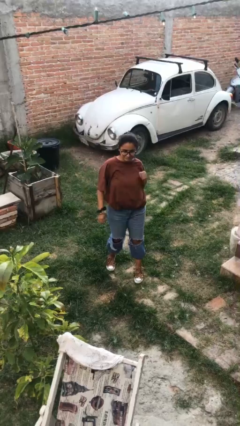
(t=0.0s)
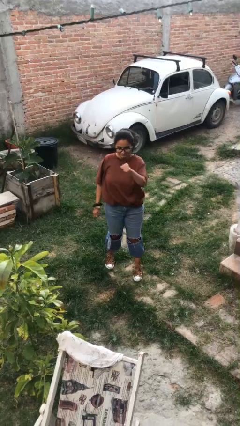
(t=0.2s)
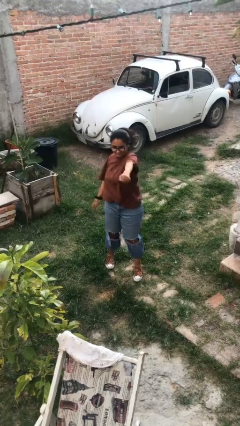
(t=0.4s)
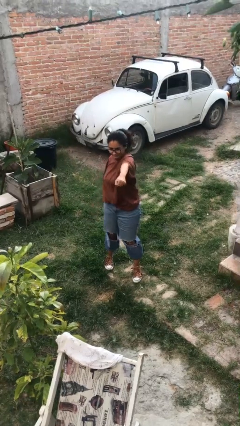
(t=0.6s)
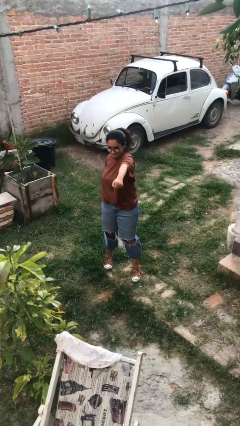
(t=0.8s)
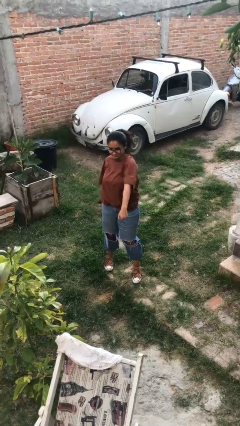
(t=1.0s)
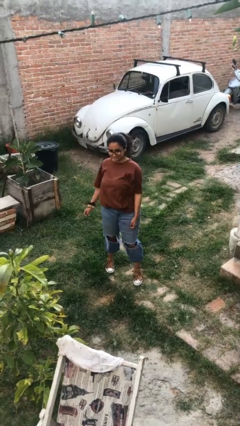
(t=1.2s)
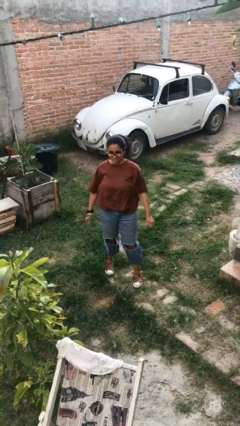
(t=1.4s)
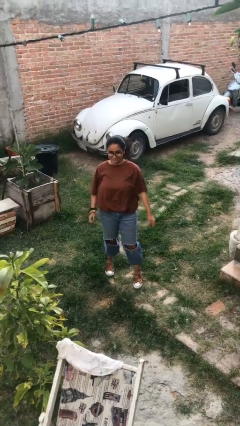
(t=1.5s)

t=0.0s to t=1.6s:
person karate chop

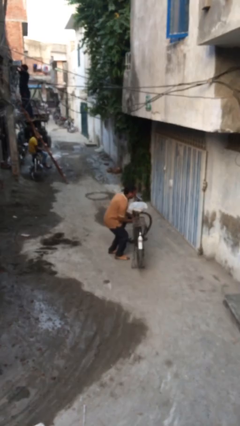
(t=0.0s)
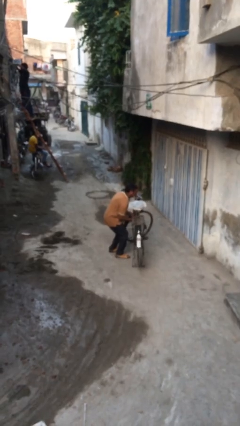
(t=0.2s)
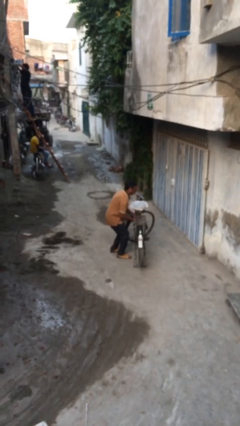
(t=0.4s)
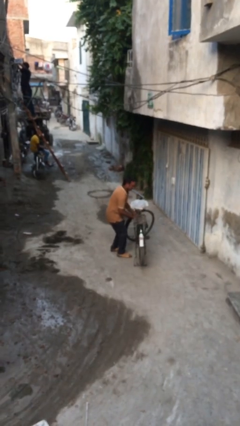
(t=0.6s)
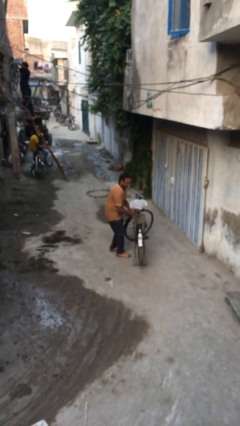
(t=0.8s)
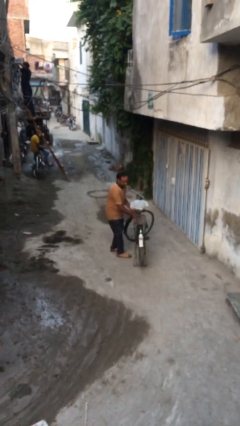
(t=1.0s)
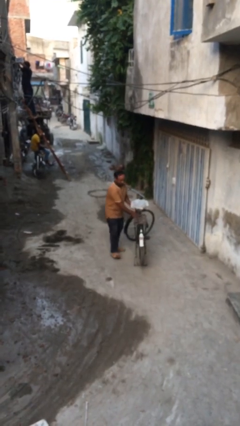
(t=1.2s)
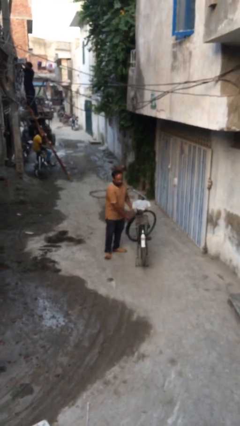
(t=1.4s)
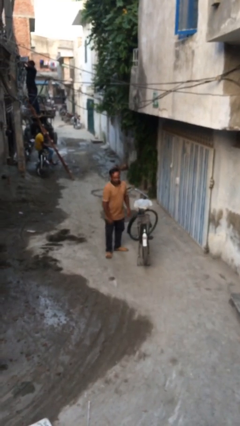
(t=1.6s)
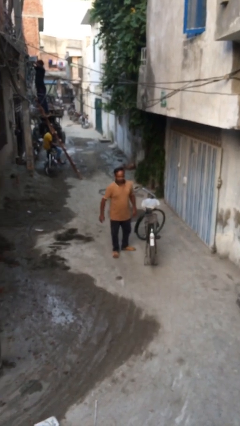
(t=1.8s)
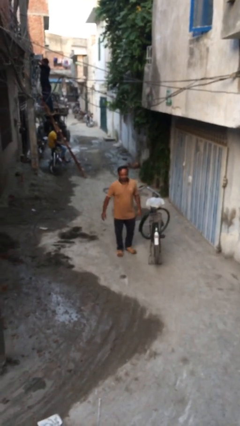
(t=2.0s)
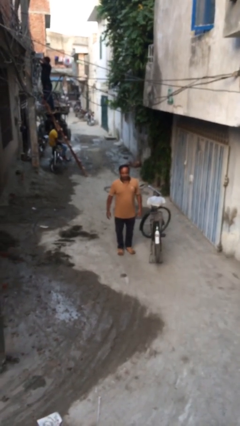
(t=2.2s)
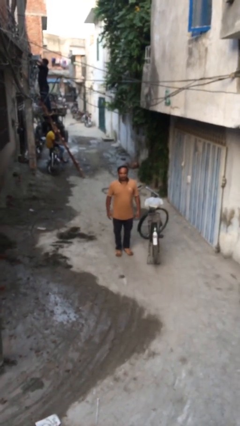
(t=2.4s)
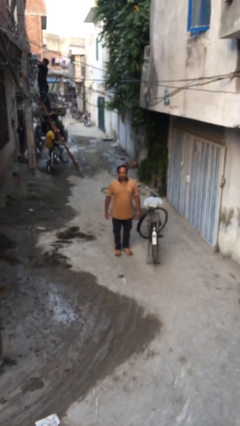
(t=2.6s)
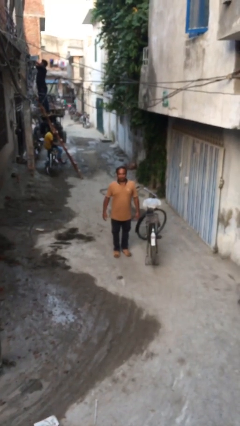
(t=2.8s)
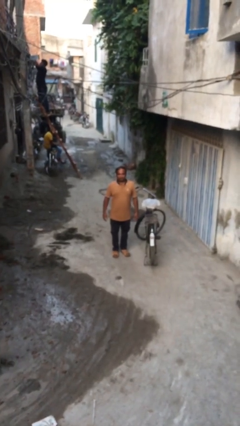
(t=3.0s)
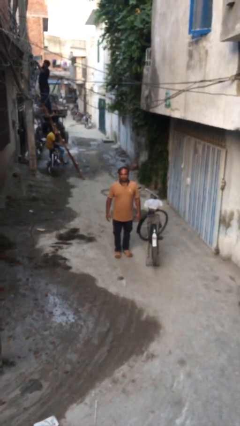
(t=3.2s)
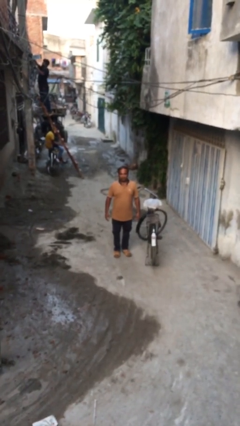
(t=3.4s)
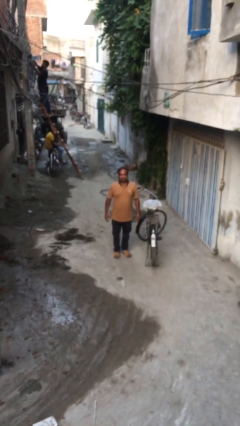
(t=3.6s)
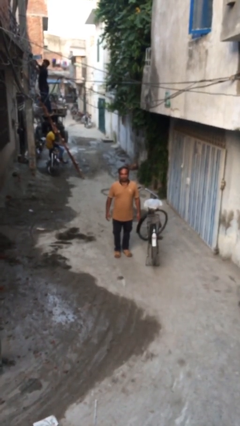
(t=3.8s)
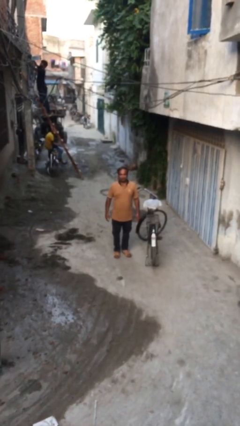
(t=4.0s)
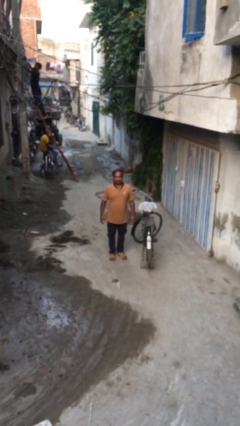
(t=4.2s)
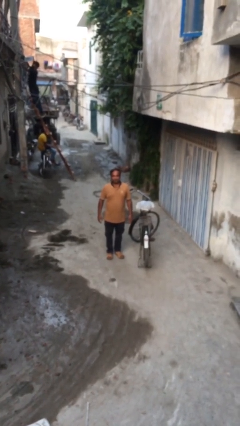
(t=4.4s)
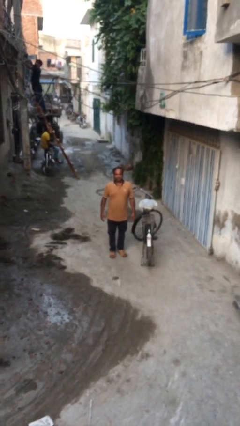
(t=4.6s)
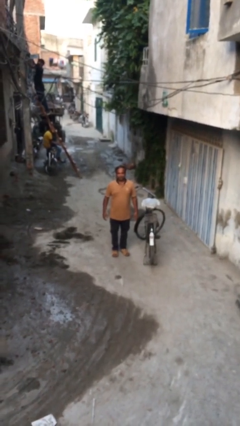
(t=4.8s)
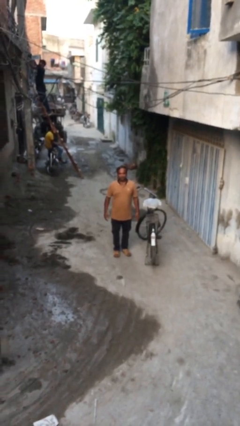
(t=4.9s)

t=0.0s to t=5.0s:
person puts down object on floor

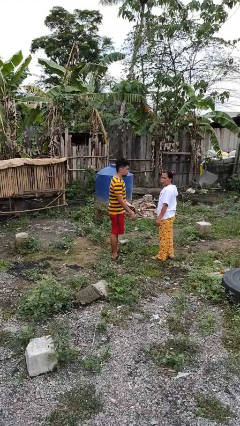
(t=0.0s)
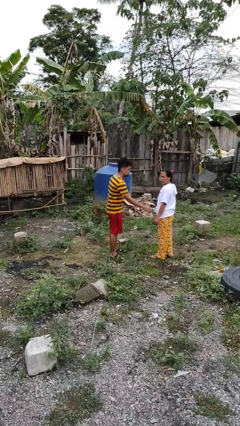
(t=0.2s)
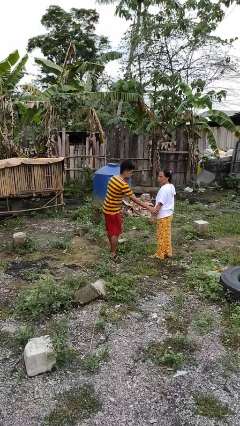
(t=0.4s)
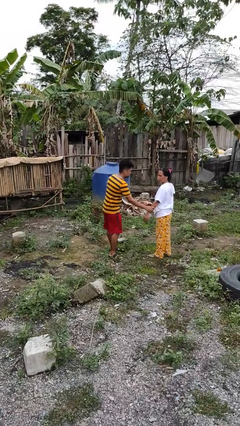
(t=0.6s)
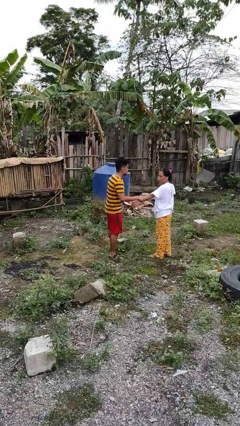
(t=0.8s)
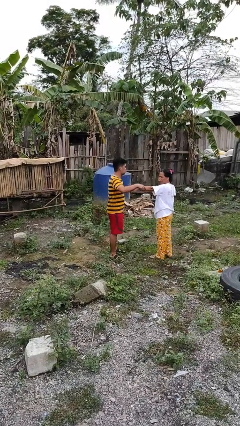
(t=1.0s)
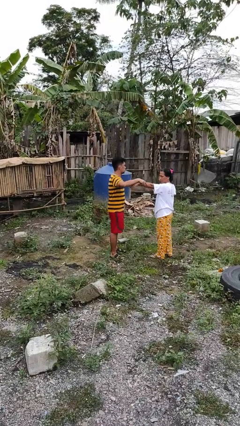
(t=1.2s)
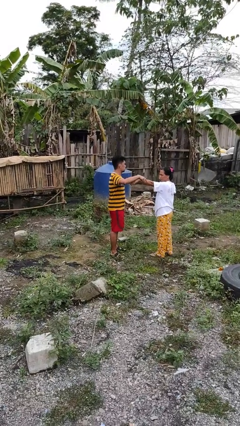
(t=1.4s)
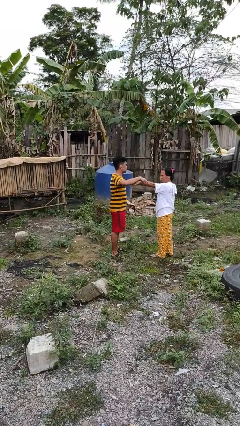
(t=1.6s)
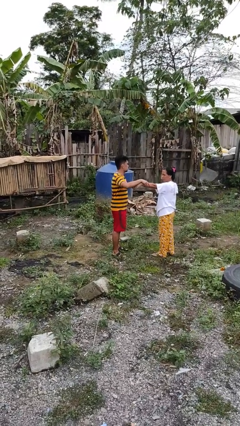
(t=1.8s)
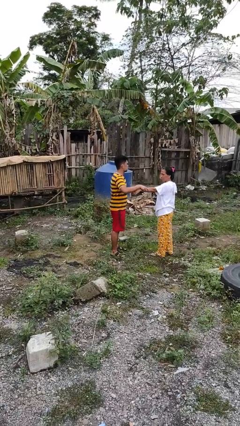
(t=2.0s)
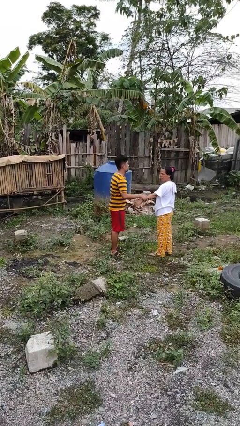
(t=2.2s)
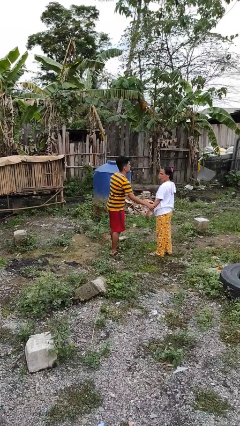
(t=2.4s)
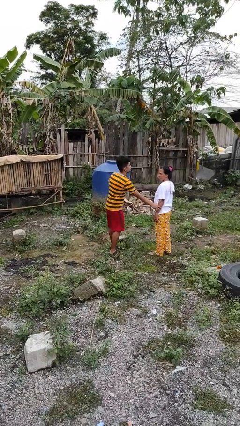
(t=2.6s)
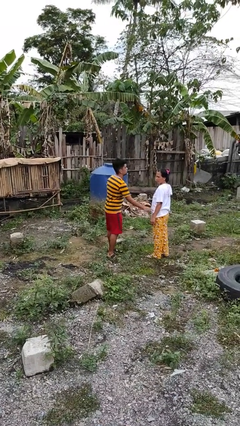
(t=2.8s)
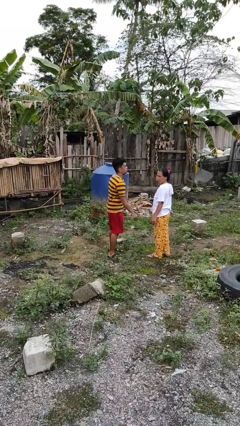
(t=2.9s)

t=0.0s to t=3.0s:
person grabs person by forearm

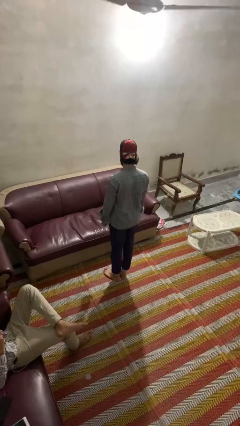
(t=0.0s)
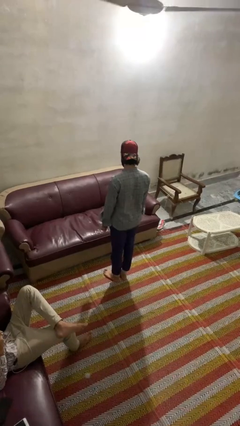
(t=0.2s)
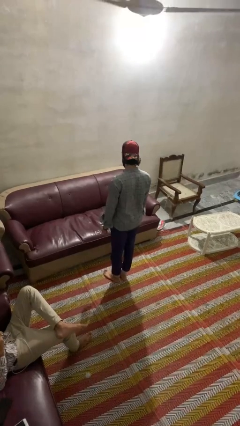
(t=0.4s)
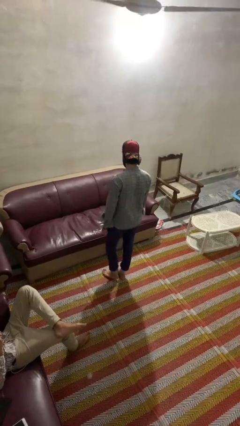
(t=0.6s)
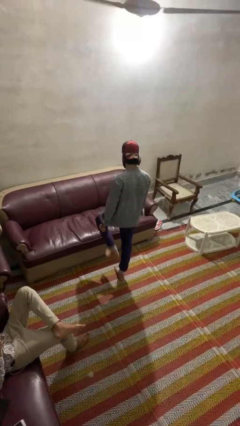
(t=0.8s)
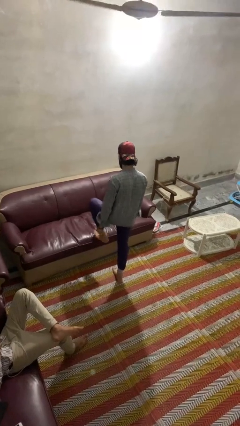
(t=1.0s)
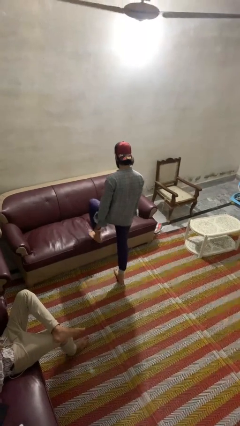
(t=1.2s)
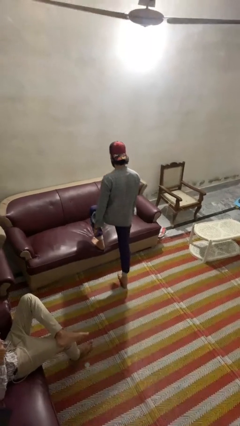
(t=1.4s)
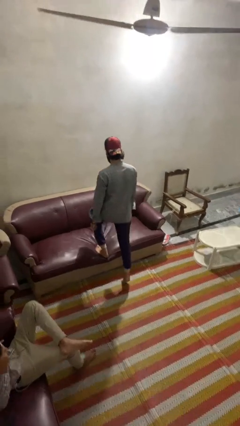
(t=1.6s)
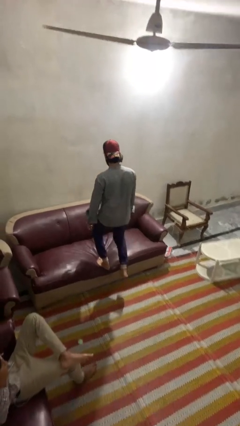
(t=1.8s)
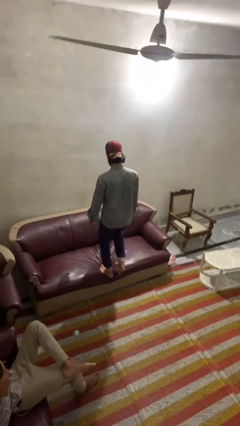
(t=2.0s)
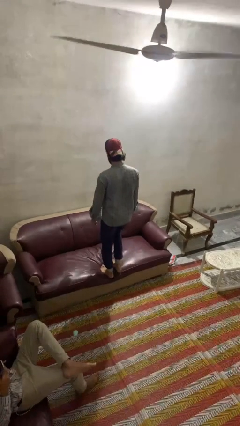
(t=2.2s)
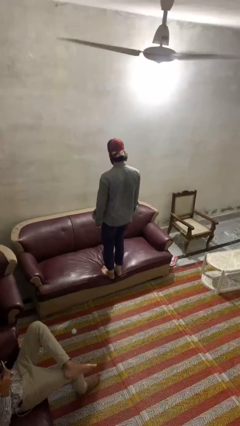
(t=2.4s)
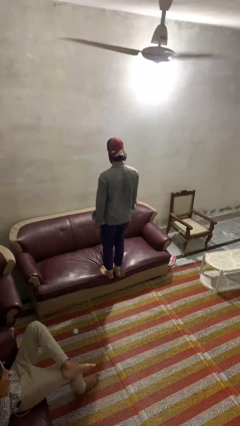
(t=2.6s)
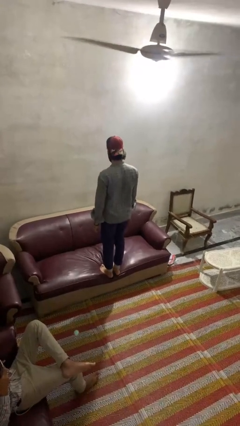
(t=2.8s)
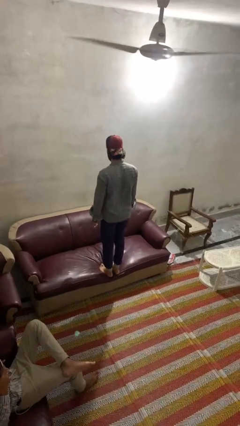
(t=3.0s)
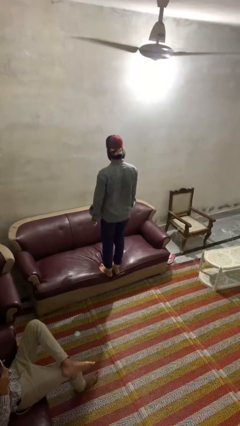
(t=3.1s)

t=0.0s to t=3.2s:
person climbs on couch

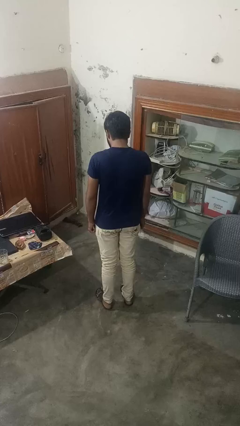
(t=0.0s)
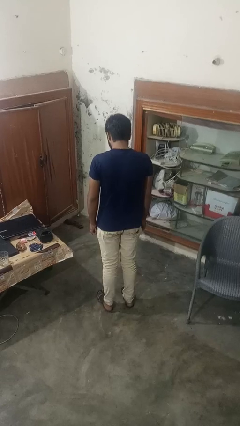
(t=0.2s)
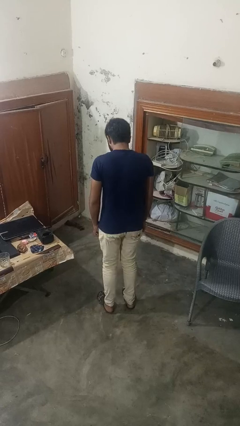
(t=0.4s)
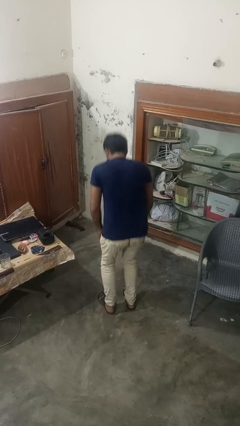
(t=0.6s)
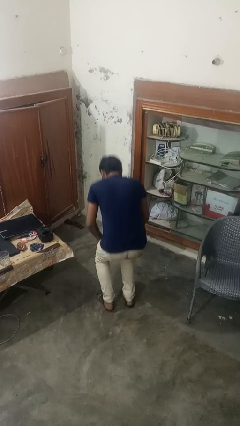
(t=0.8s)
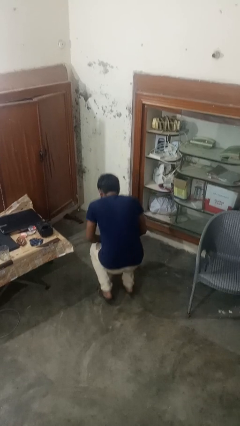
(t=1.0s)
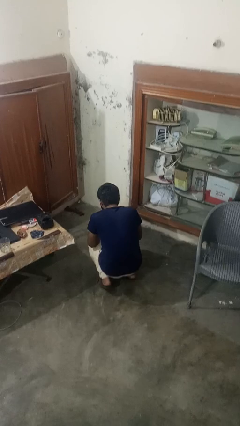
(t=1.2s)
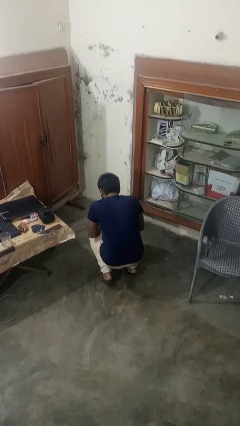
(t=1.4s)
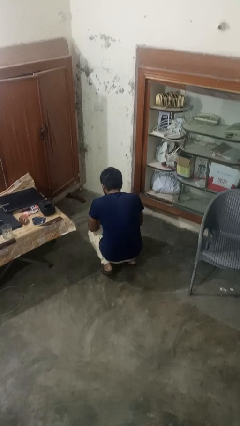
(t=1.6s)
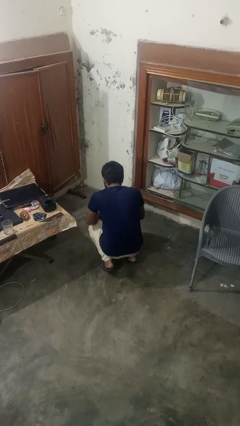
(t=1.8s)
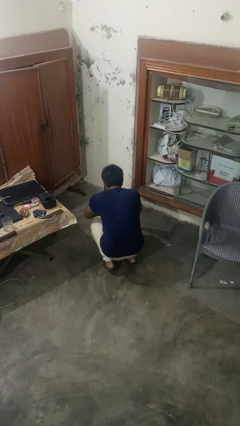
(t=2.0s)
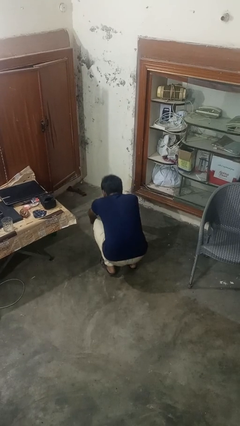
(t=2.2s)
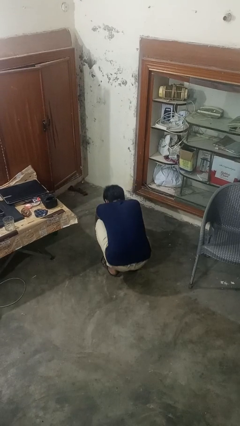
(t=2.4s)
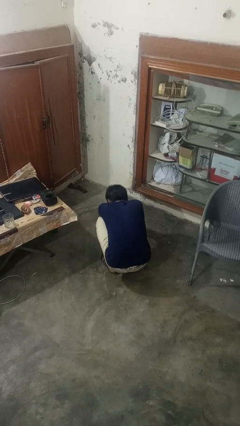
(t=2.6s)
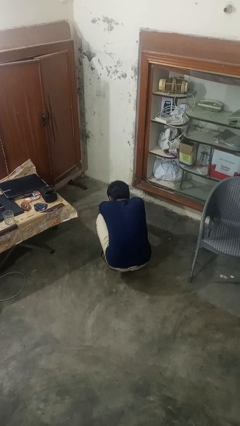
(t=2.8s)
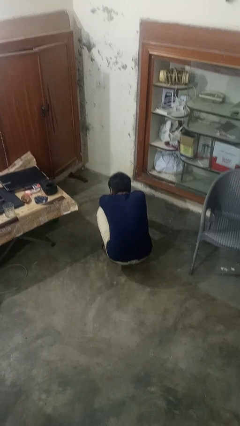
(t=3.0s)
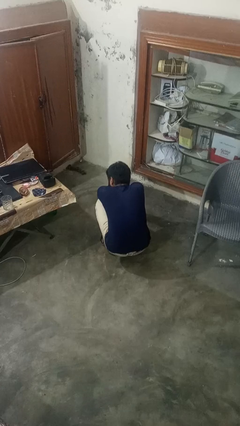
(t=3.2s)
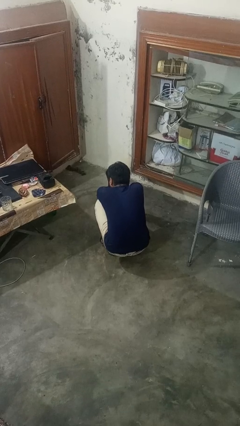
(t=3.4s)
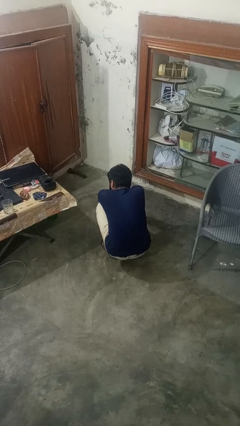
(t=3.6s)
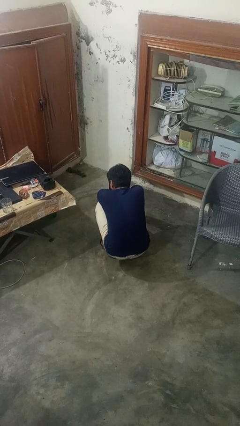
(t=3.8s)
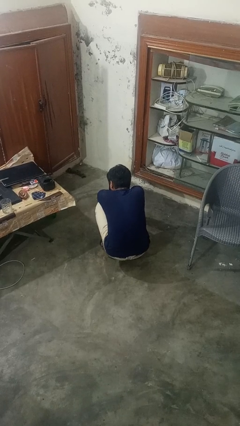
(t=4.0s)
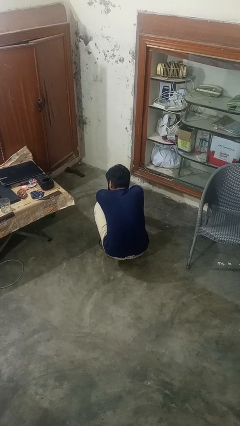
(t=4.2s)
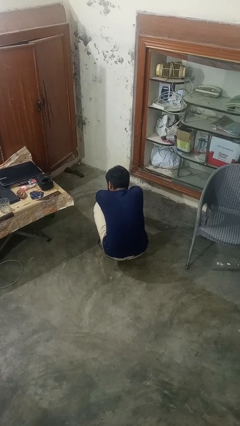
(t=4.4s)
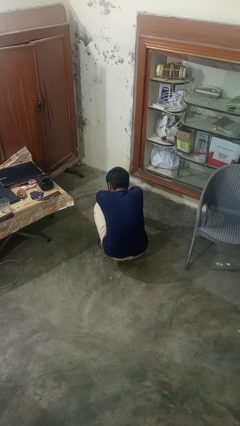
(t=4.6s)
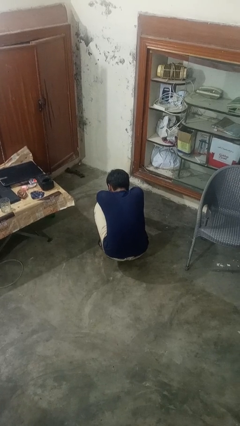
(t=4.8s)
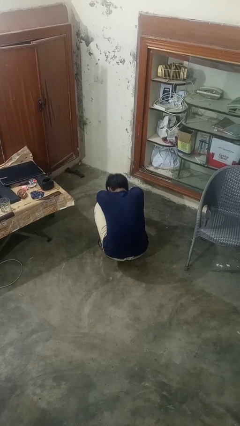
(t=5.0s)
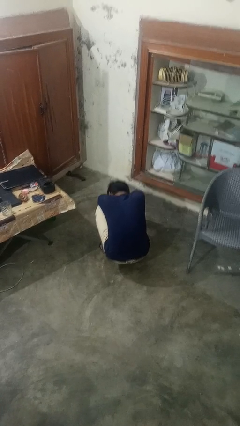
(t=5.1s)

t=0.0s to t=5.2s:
person squats
